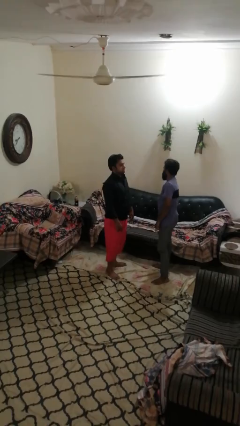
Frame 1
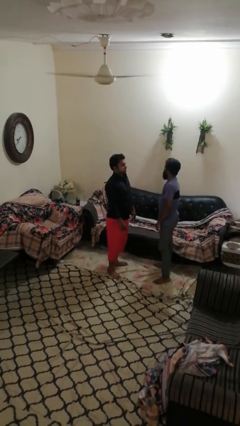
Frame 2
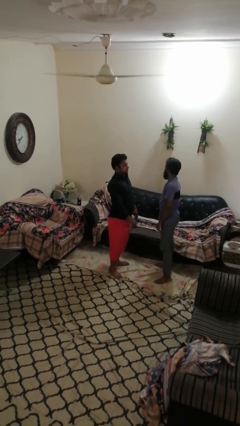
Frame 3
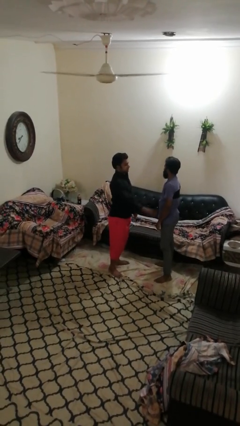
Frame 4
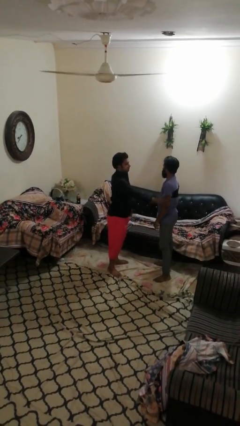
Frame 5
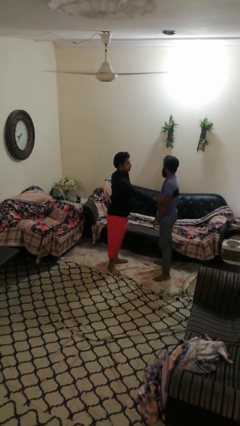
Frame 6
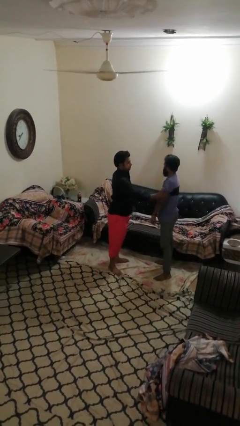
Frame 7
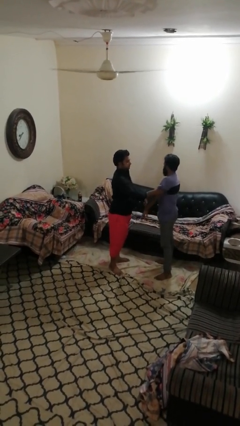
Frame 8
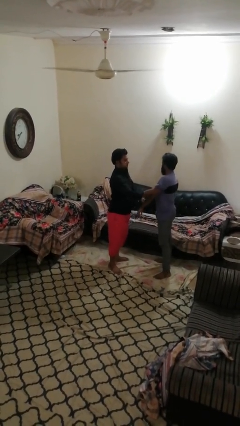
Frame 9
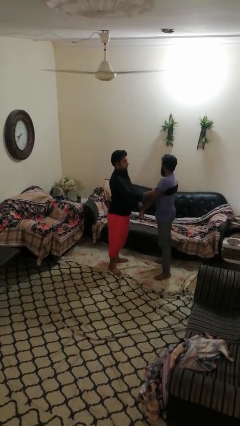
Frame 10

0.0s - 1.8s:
person grabs person by bicep

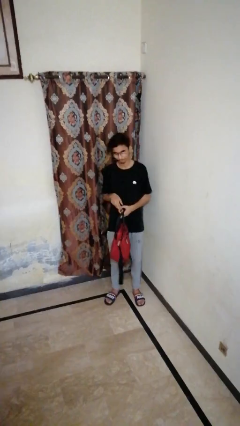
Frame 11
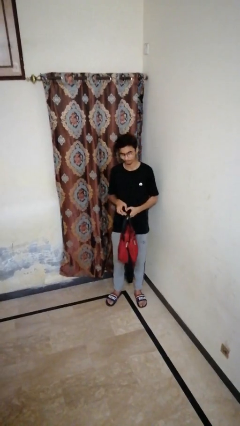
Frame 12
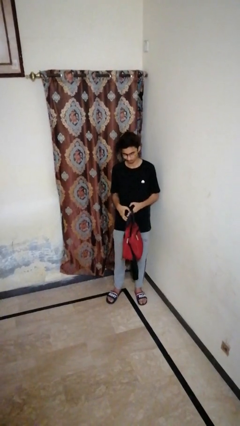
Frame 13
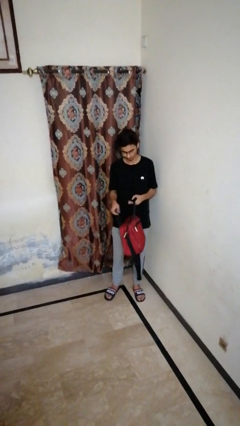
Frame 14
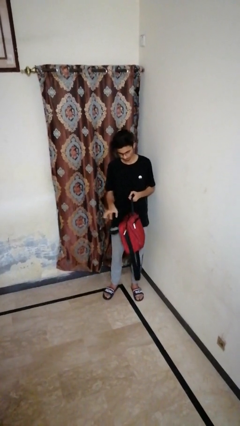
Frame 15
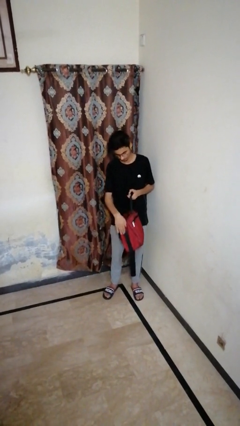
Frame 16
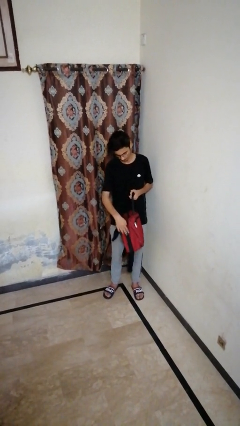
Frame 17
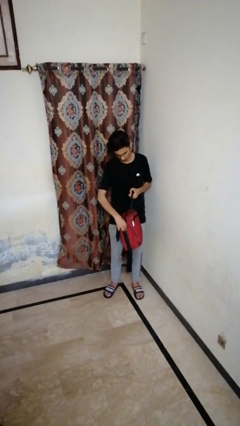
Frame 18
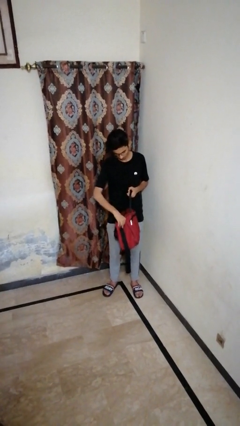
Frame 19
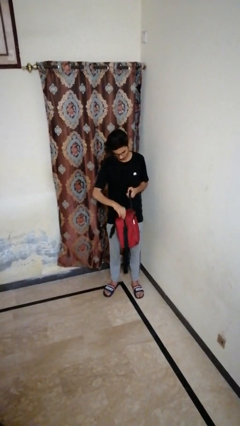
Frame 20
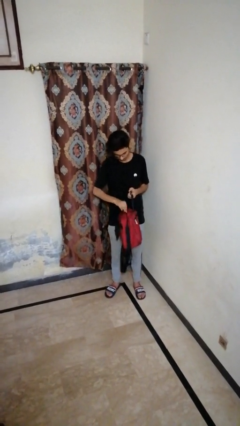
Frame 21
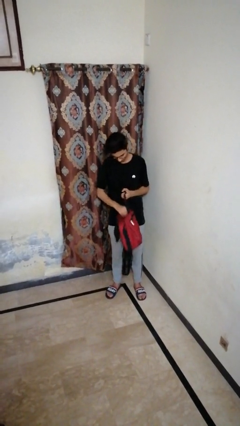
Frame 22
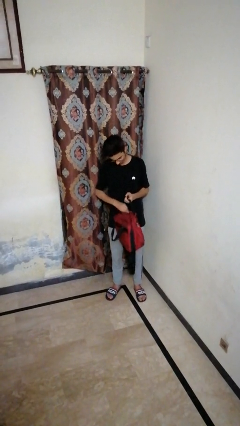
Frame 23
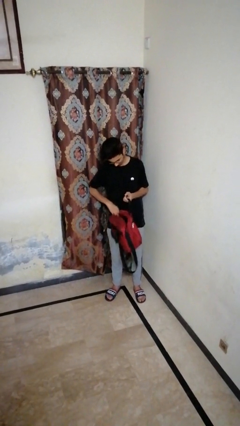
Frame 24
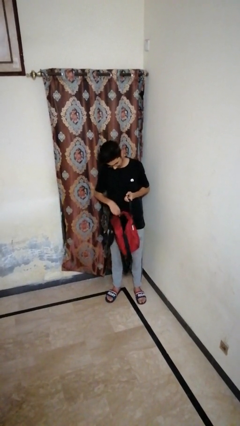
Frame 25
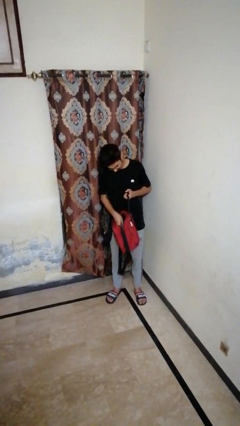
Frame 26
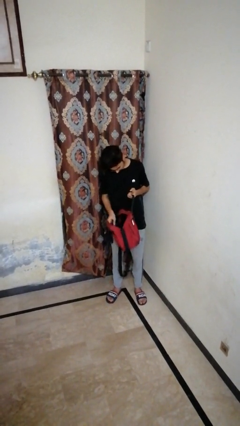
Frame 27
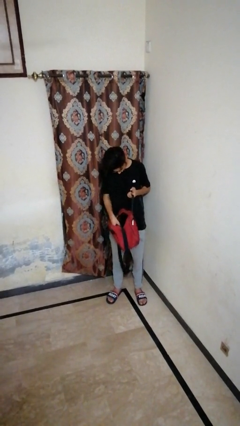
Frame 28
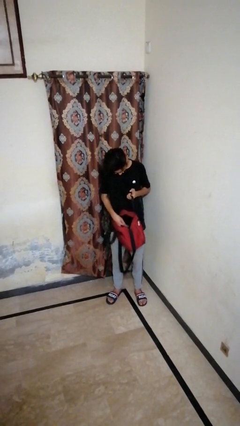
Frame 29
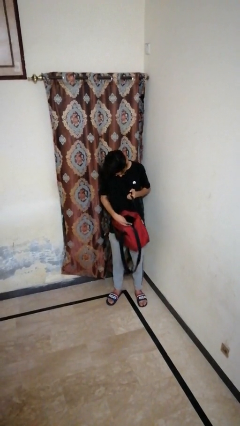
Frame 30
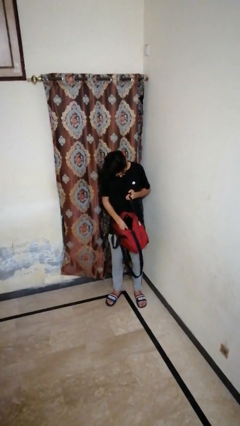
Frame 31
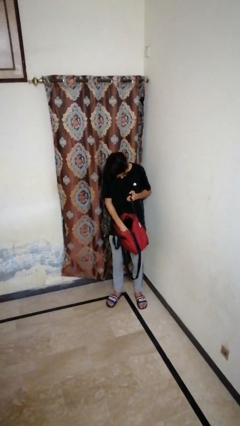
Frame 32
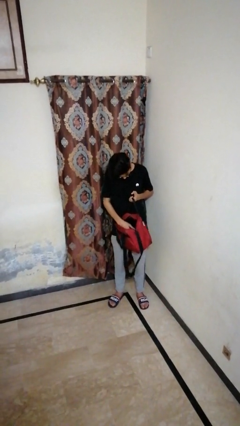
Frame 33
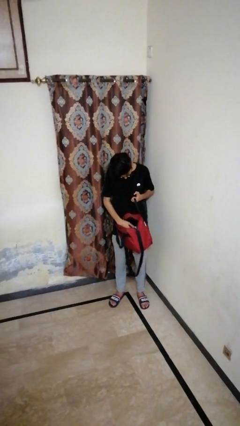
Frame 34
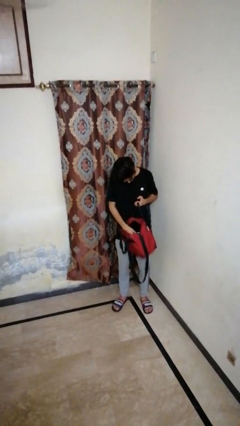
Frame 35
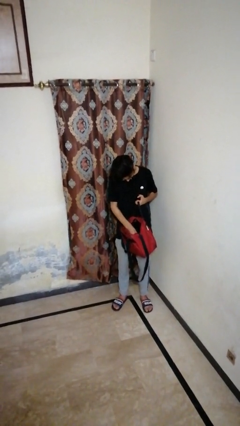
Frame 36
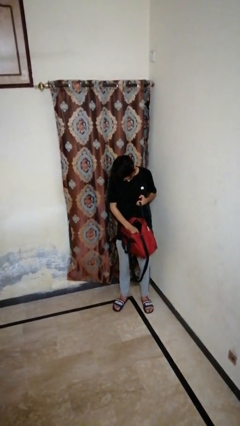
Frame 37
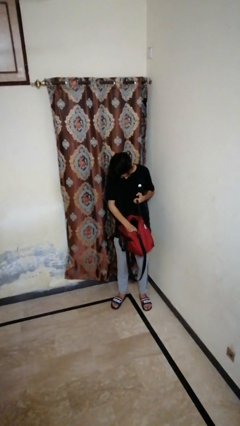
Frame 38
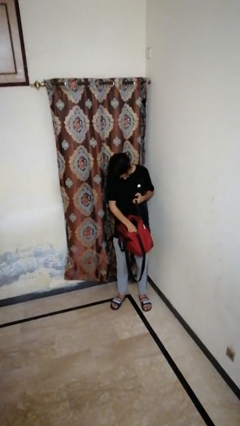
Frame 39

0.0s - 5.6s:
person searches in backpack

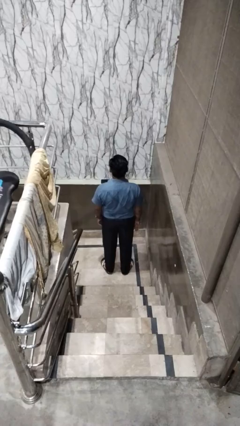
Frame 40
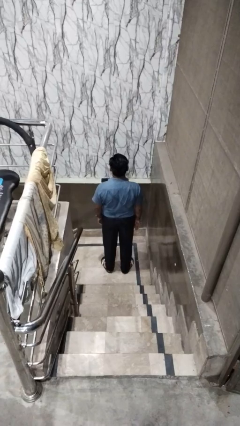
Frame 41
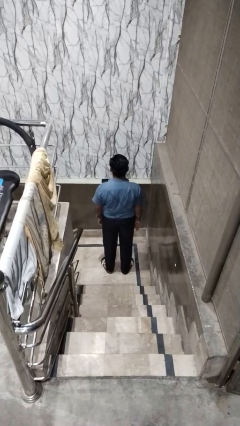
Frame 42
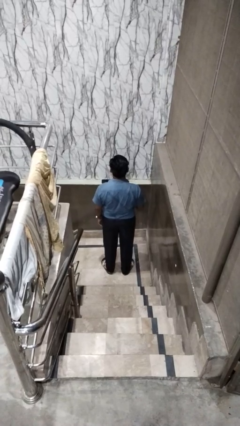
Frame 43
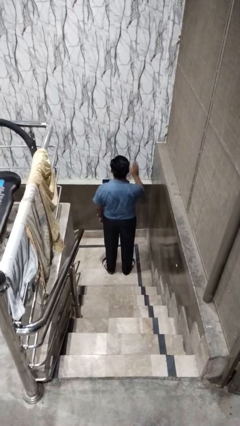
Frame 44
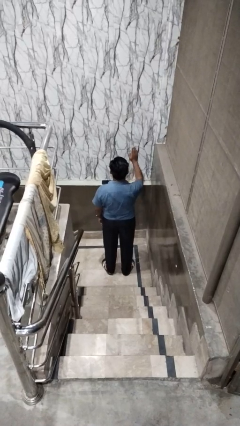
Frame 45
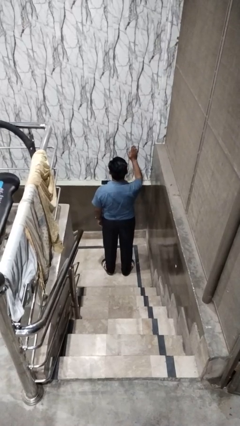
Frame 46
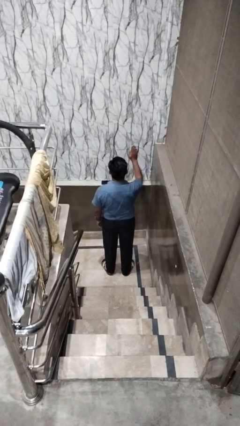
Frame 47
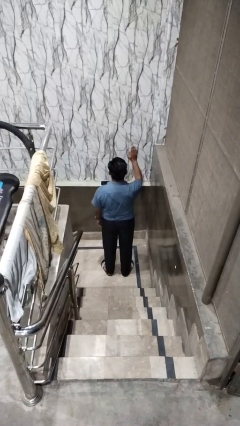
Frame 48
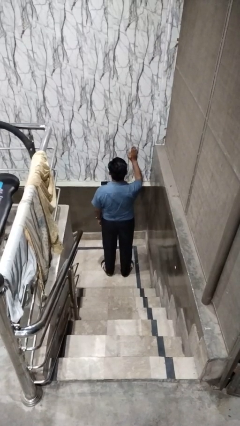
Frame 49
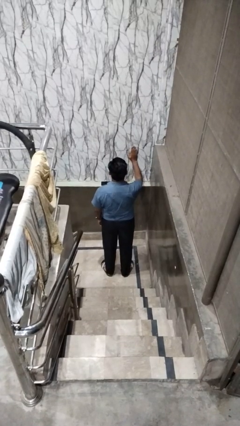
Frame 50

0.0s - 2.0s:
person gestures stop

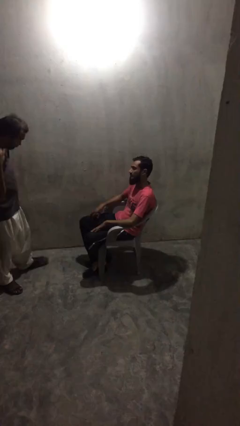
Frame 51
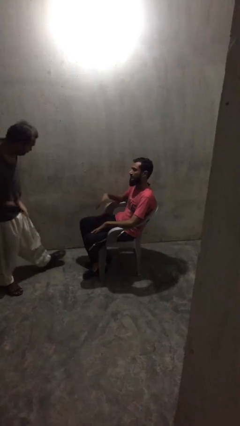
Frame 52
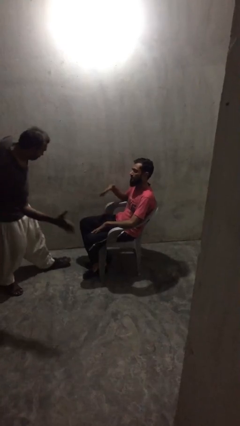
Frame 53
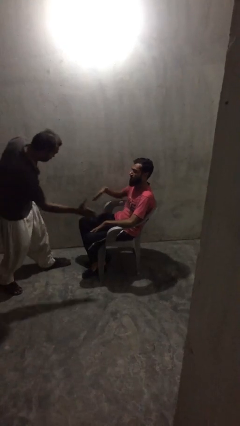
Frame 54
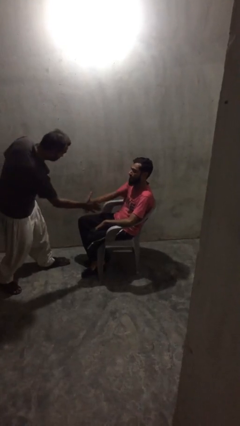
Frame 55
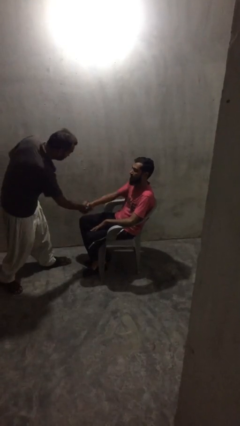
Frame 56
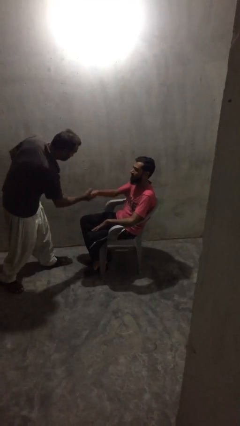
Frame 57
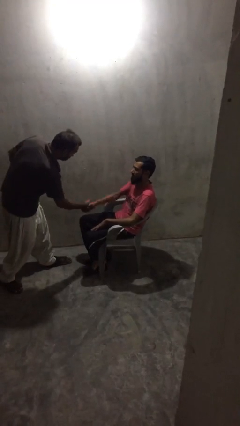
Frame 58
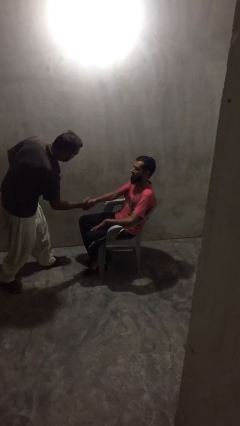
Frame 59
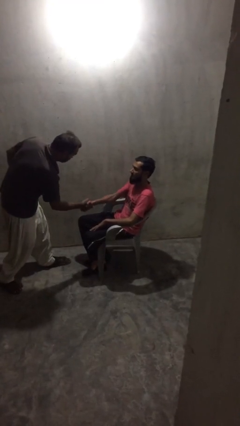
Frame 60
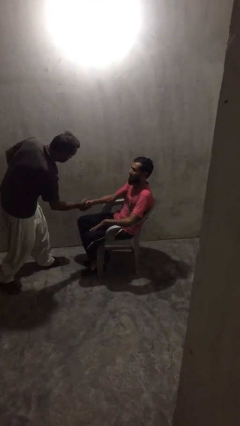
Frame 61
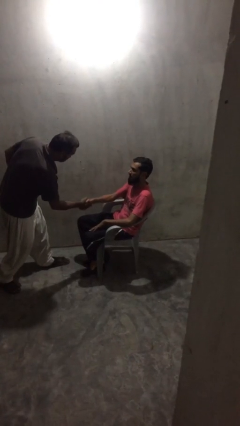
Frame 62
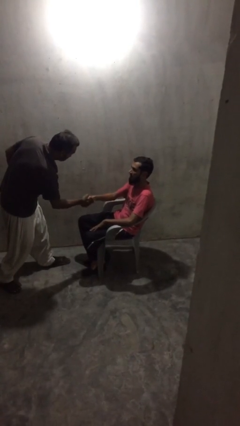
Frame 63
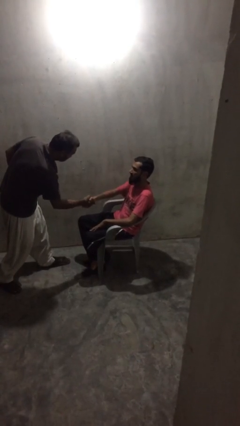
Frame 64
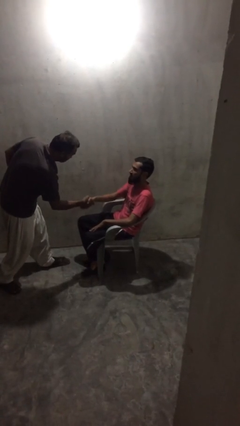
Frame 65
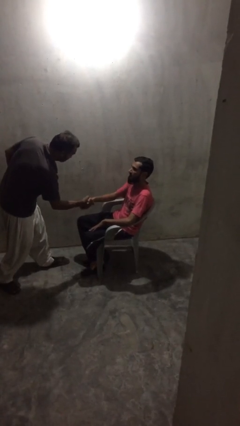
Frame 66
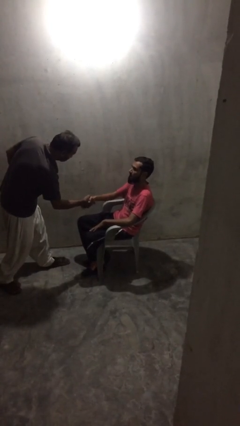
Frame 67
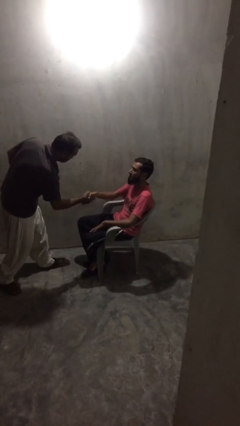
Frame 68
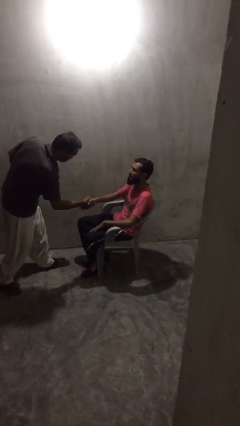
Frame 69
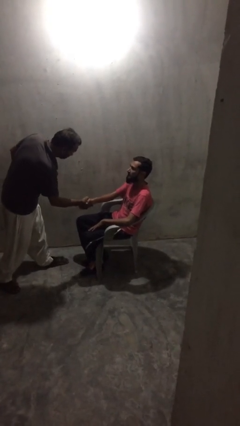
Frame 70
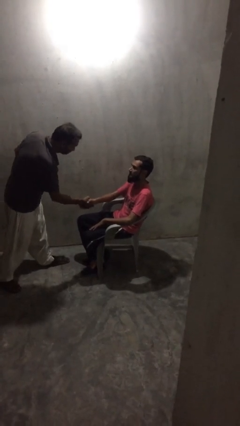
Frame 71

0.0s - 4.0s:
person shakes hand

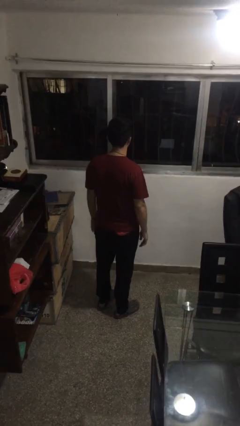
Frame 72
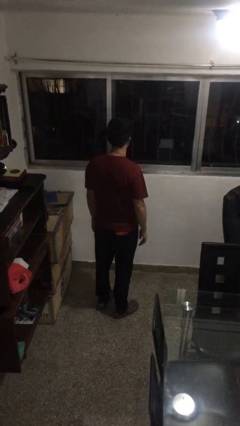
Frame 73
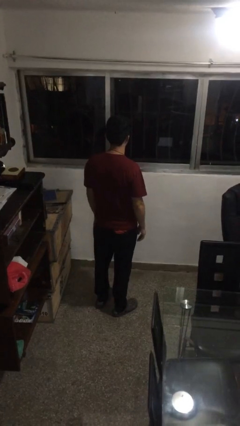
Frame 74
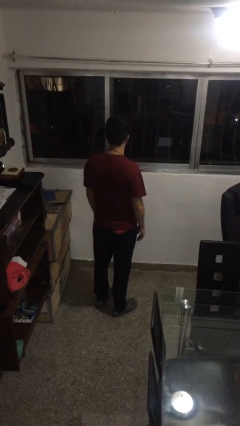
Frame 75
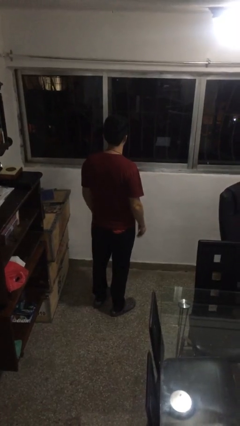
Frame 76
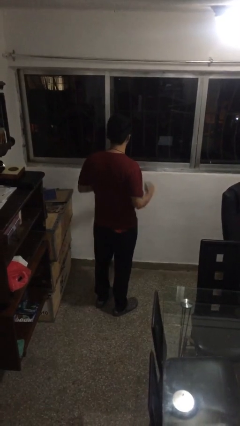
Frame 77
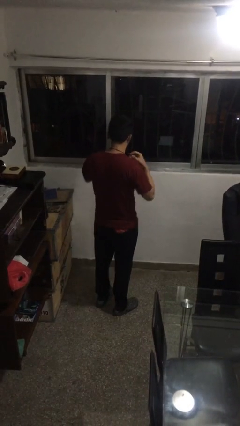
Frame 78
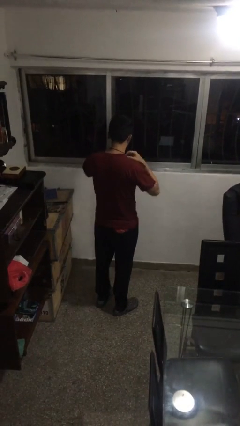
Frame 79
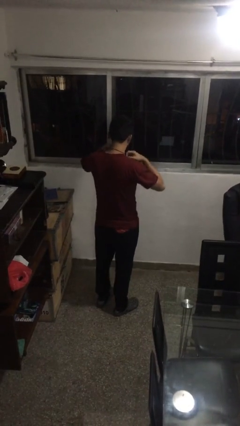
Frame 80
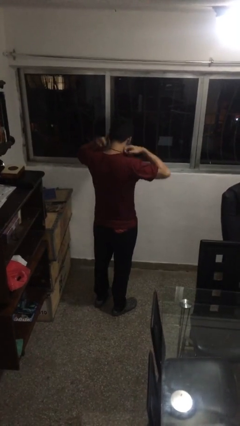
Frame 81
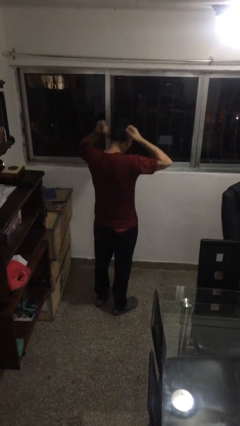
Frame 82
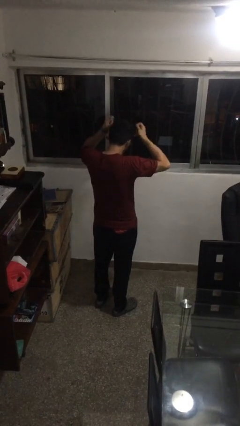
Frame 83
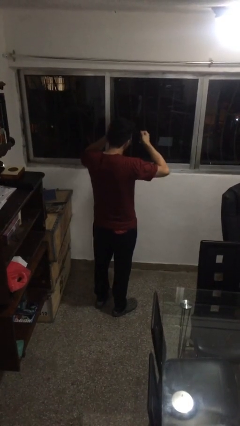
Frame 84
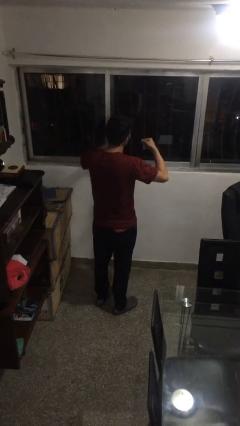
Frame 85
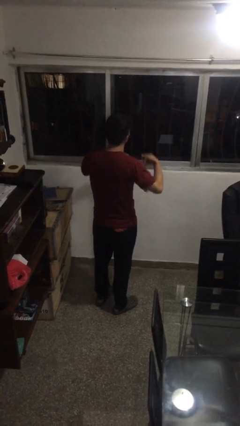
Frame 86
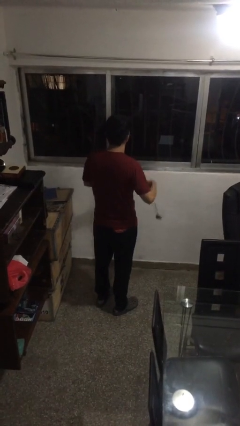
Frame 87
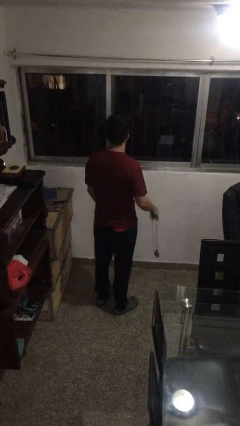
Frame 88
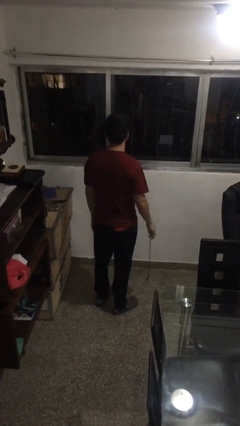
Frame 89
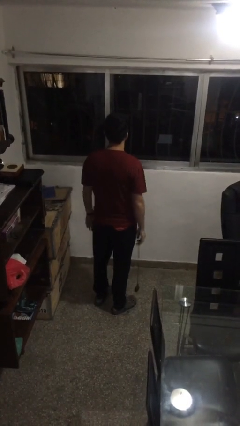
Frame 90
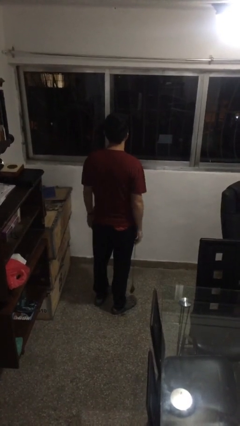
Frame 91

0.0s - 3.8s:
person takes off necklace
